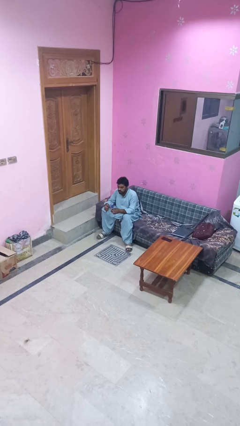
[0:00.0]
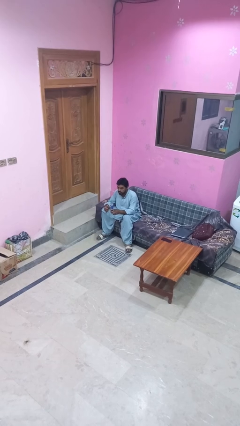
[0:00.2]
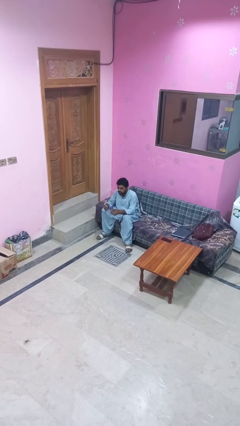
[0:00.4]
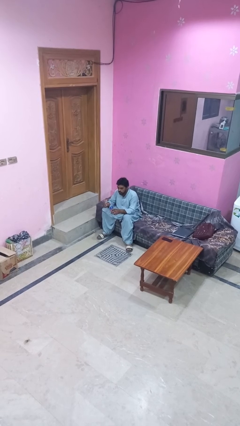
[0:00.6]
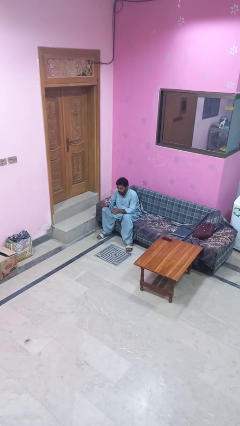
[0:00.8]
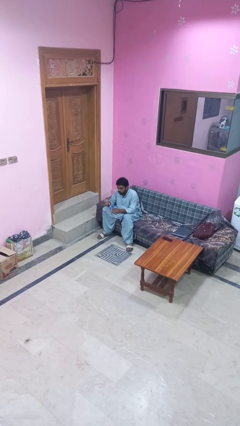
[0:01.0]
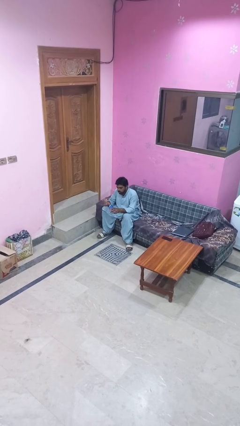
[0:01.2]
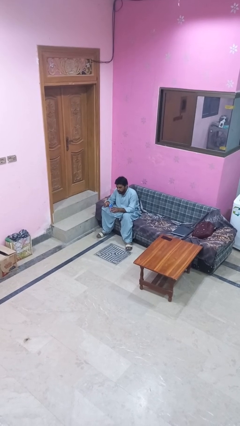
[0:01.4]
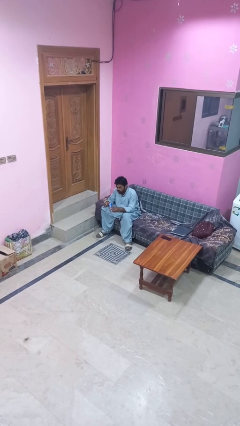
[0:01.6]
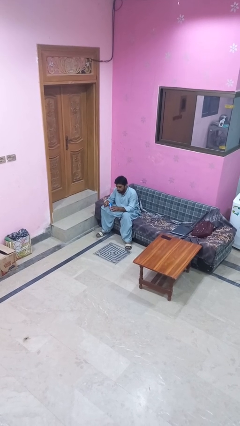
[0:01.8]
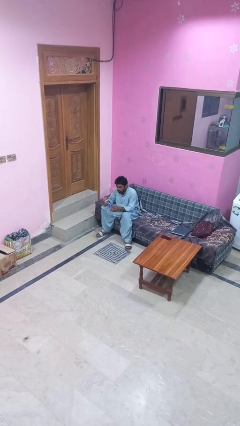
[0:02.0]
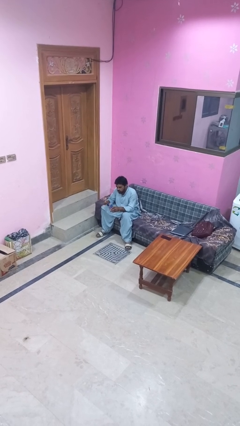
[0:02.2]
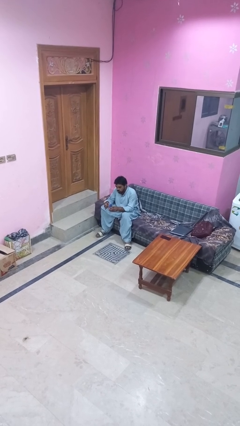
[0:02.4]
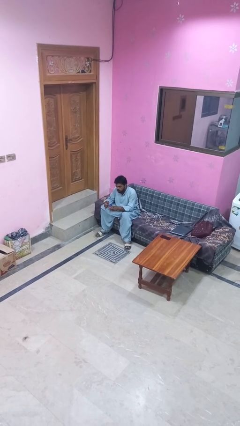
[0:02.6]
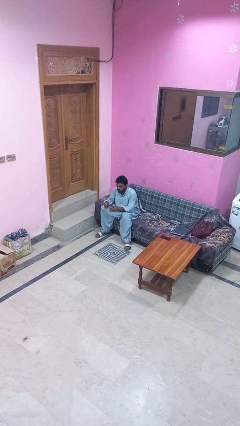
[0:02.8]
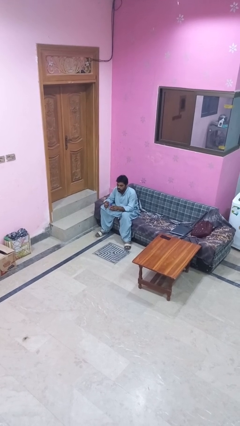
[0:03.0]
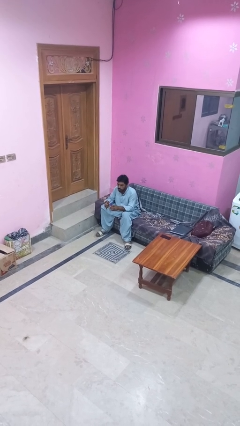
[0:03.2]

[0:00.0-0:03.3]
person opens can with can opener

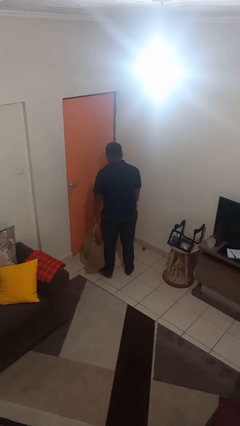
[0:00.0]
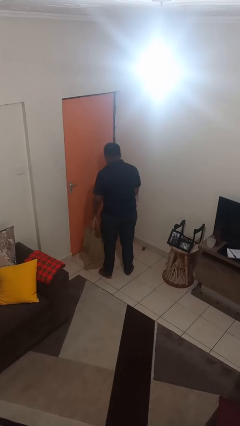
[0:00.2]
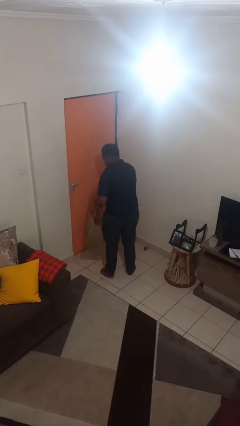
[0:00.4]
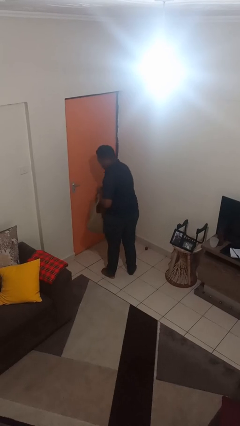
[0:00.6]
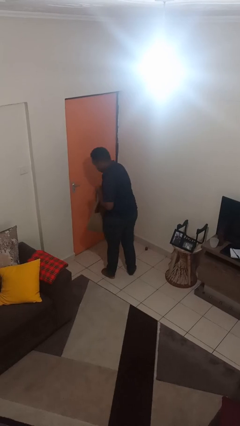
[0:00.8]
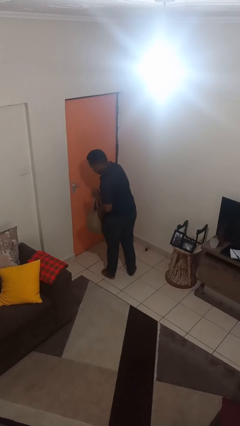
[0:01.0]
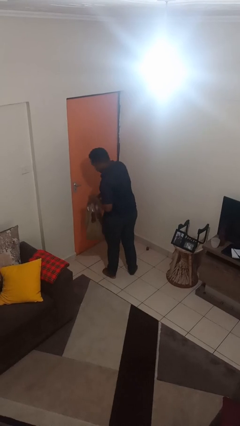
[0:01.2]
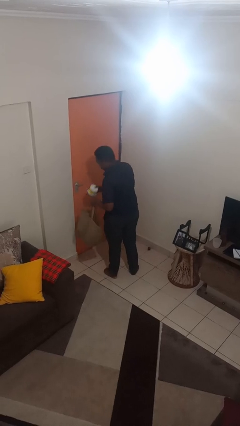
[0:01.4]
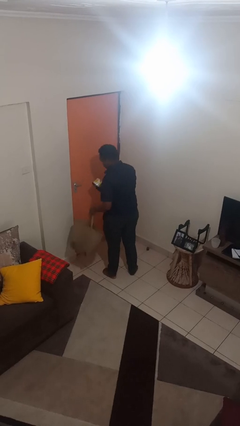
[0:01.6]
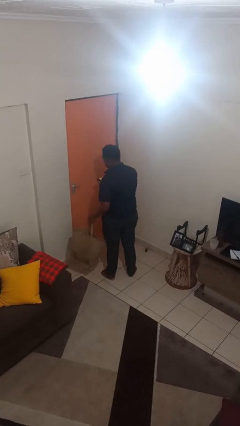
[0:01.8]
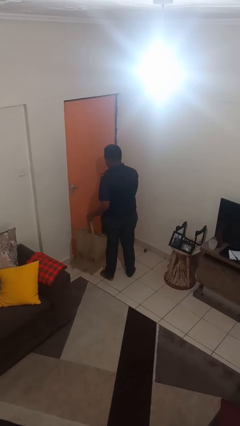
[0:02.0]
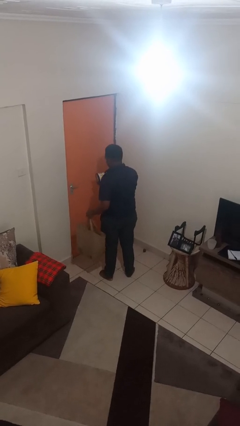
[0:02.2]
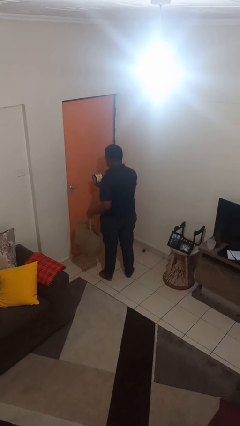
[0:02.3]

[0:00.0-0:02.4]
person takes object from bag

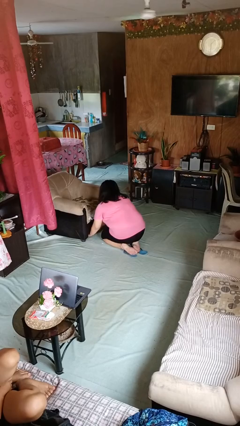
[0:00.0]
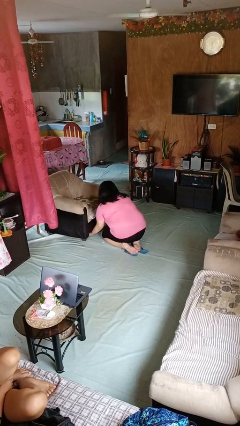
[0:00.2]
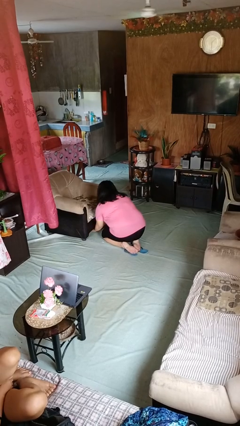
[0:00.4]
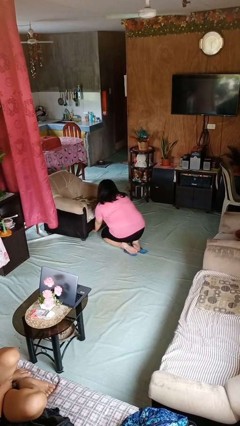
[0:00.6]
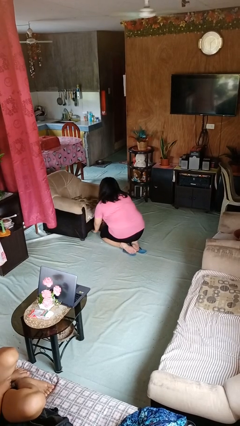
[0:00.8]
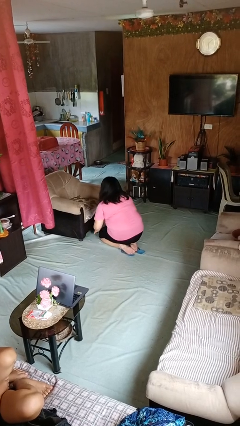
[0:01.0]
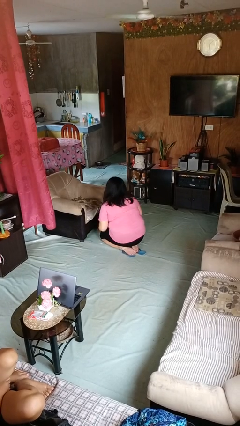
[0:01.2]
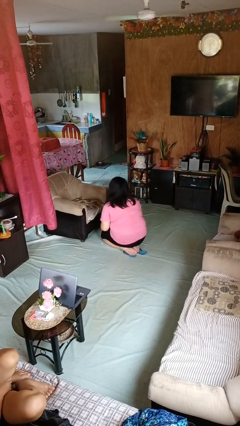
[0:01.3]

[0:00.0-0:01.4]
person searches under couch

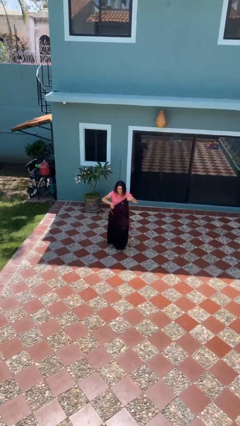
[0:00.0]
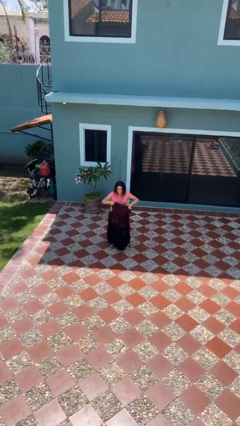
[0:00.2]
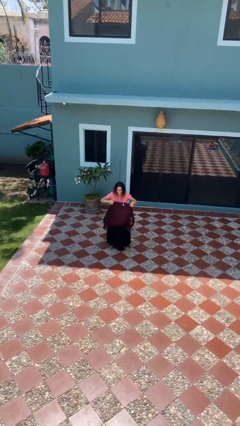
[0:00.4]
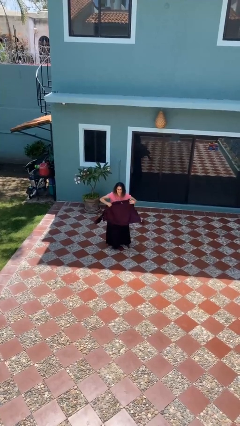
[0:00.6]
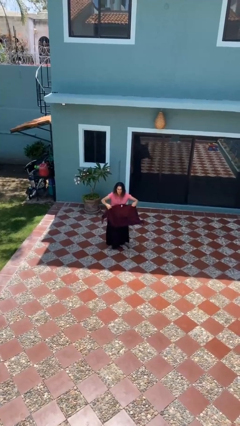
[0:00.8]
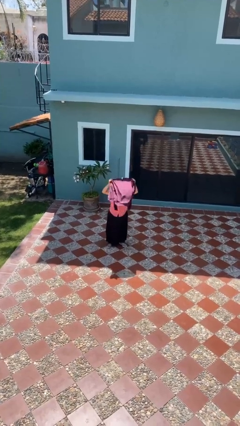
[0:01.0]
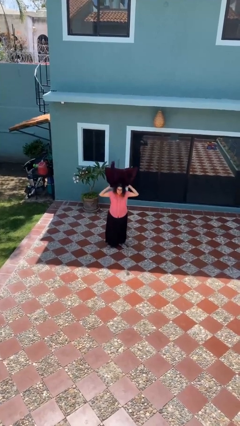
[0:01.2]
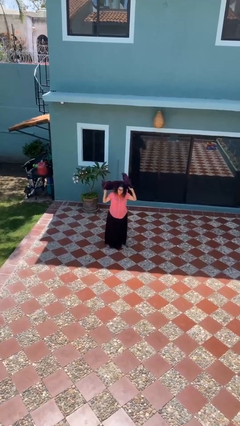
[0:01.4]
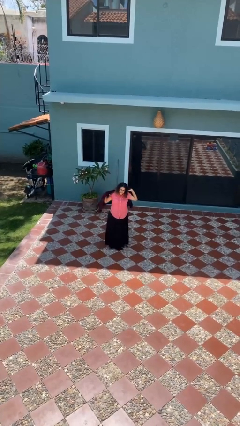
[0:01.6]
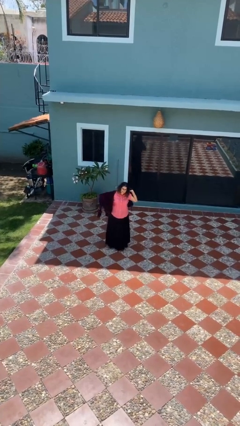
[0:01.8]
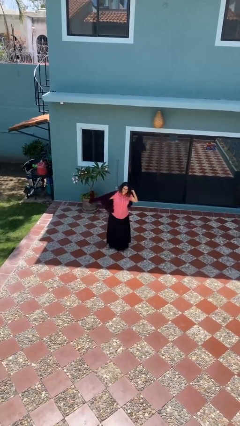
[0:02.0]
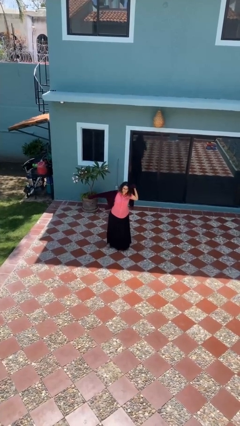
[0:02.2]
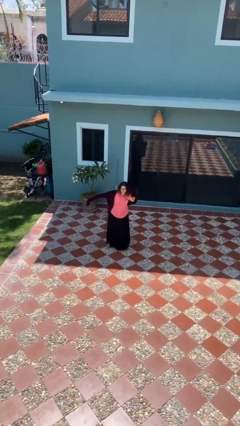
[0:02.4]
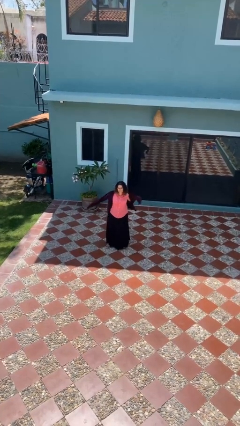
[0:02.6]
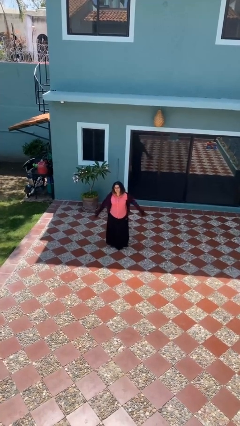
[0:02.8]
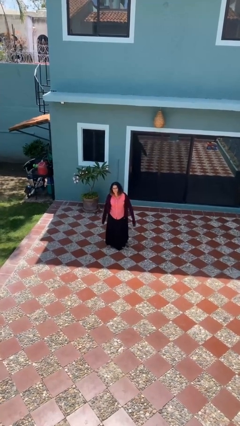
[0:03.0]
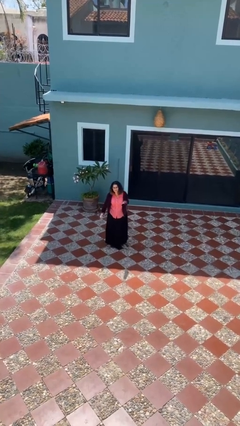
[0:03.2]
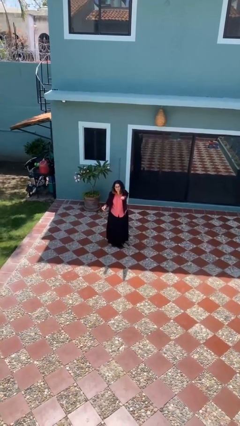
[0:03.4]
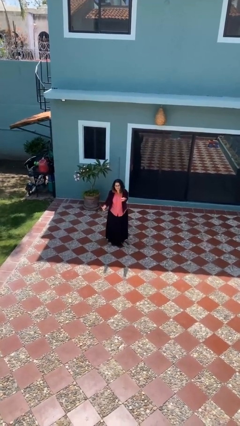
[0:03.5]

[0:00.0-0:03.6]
person puts on jacket

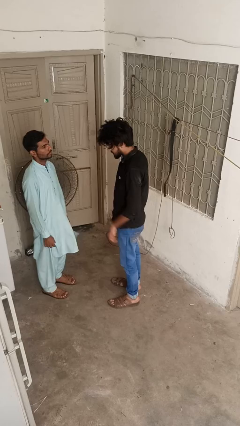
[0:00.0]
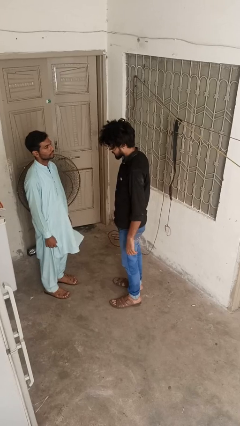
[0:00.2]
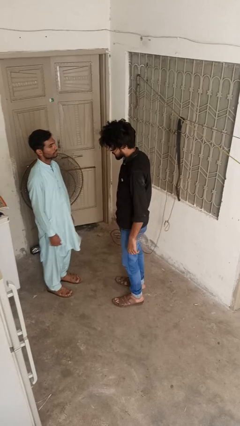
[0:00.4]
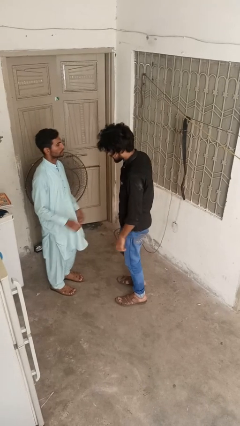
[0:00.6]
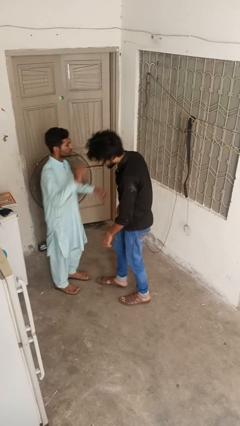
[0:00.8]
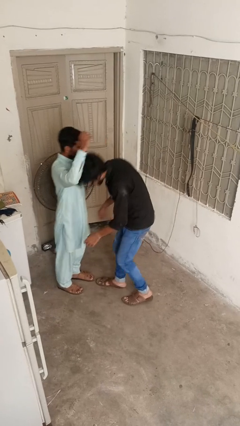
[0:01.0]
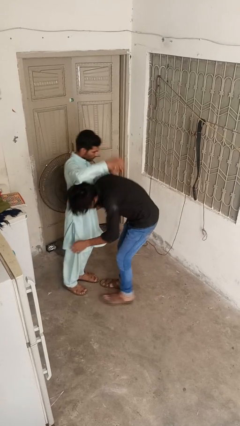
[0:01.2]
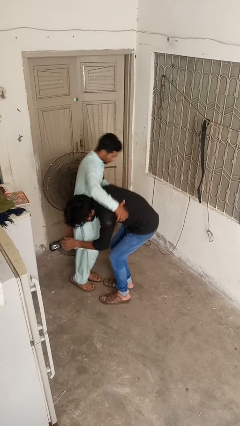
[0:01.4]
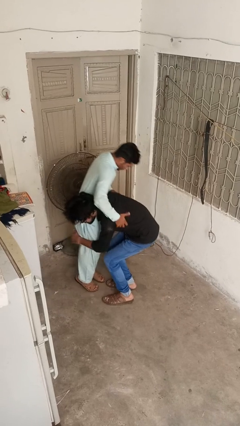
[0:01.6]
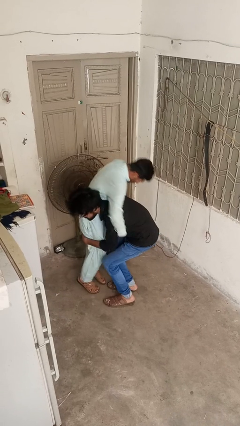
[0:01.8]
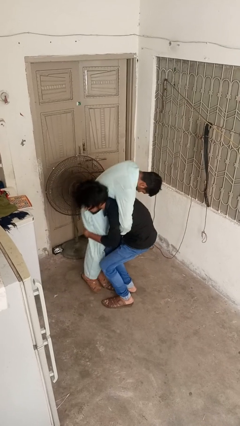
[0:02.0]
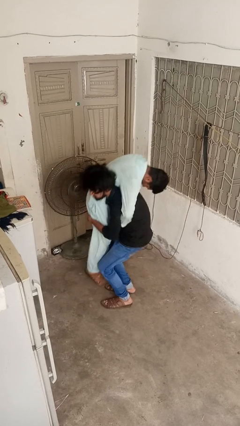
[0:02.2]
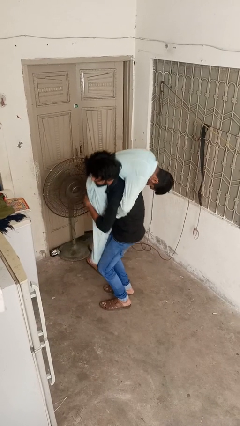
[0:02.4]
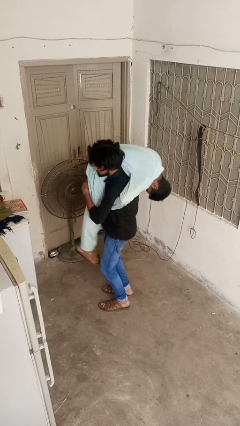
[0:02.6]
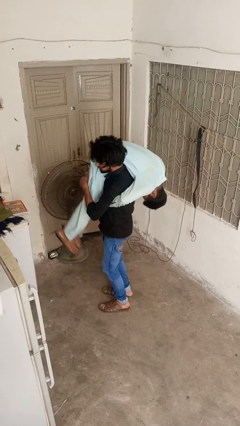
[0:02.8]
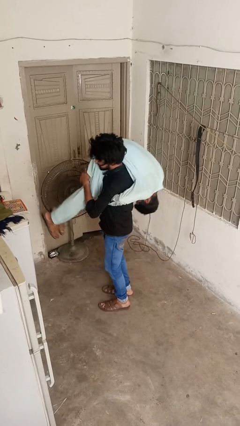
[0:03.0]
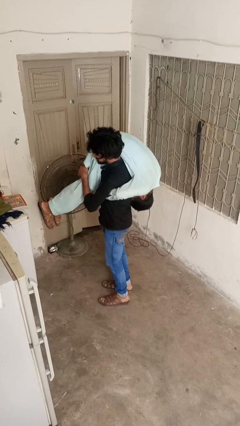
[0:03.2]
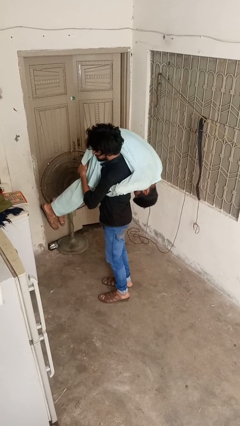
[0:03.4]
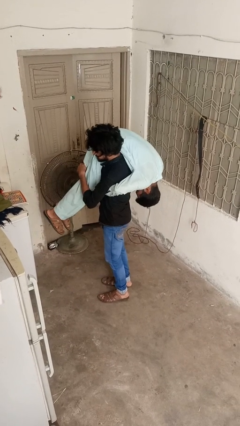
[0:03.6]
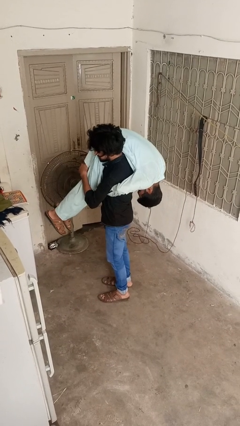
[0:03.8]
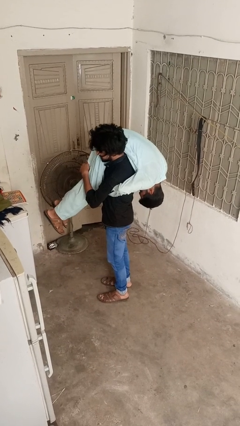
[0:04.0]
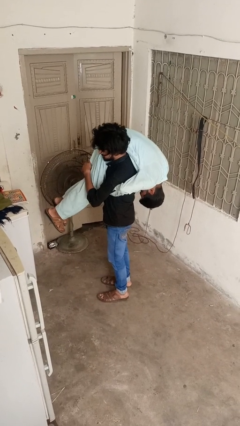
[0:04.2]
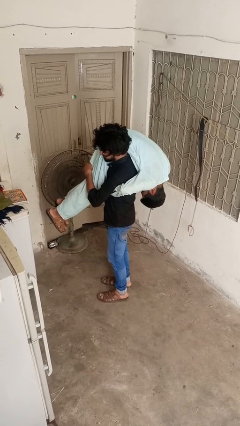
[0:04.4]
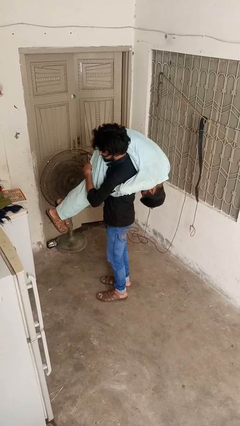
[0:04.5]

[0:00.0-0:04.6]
person carries person over shoulder

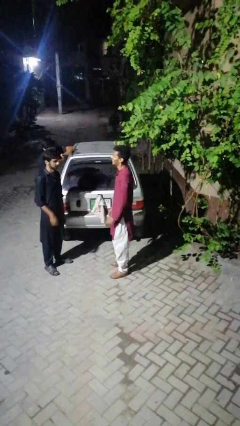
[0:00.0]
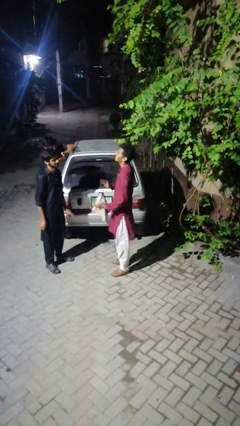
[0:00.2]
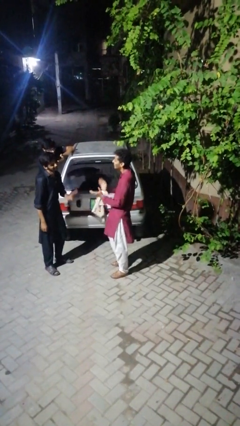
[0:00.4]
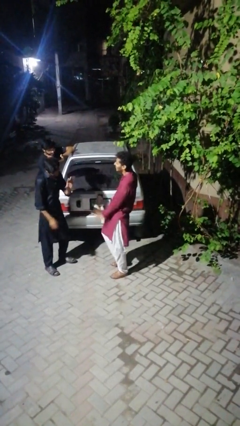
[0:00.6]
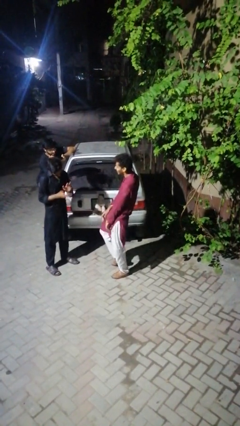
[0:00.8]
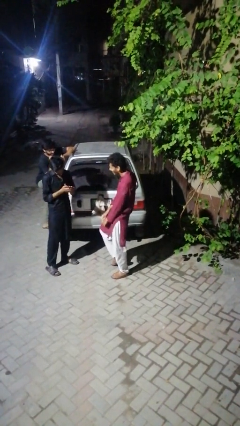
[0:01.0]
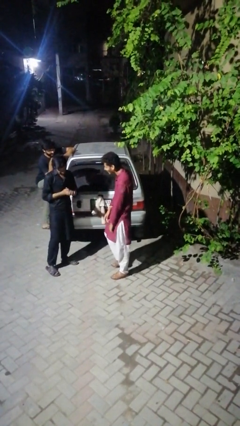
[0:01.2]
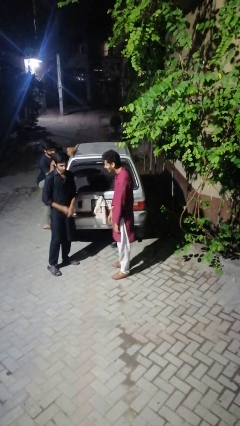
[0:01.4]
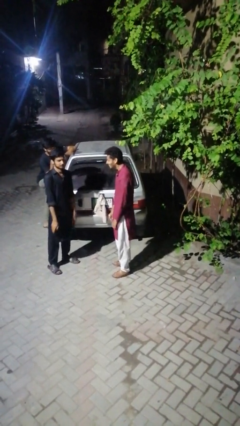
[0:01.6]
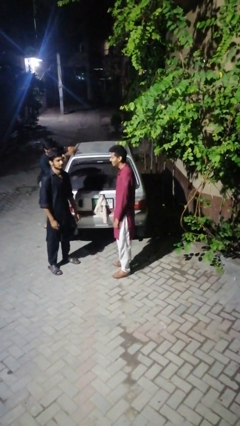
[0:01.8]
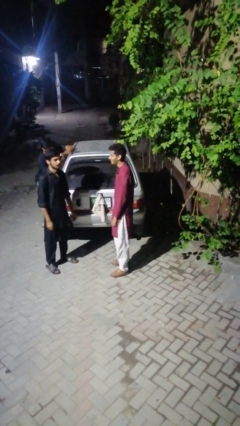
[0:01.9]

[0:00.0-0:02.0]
person laughs with person

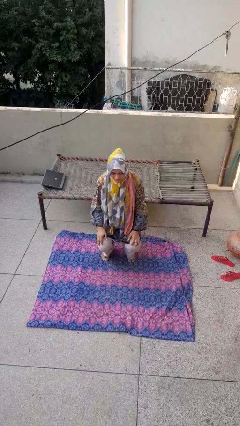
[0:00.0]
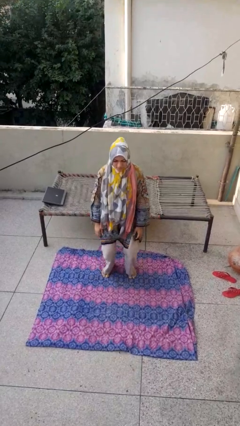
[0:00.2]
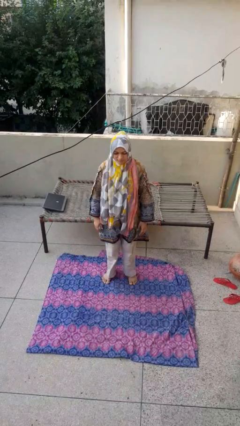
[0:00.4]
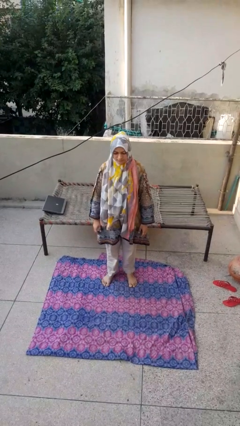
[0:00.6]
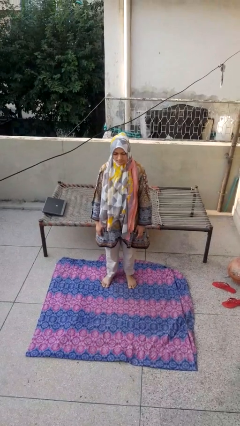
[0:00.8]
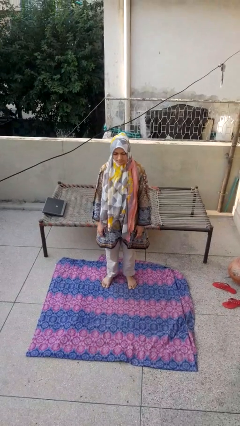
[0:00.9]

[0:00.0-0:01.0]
person stands up
